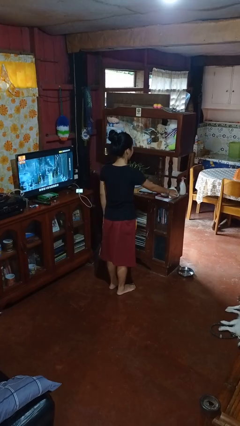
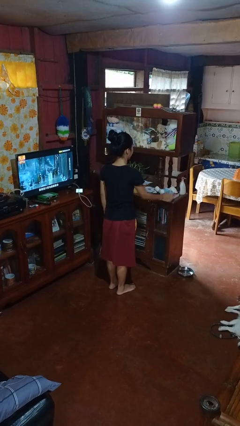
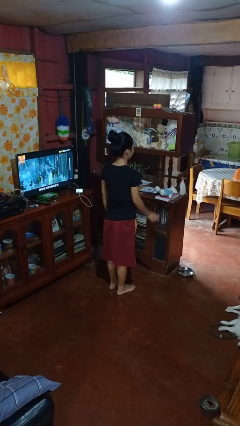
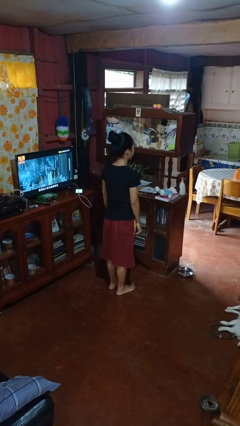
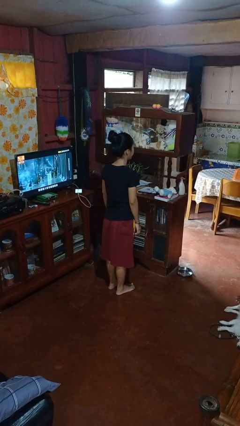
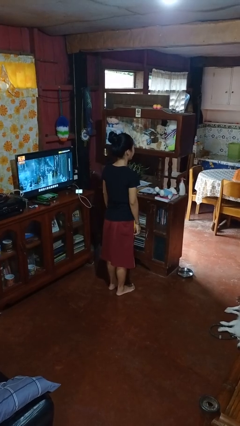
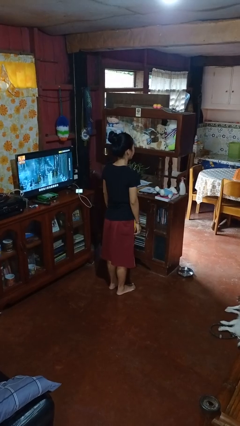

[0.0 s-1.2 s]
person puts down object on shelf

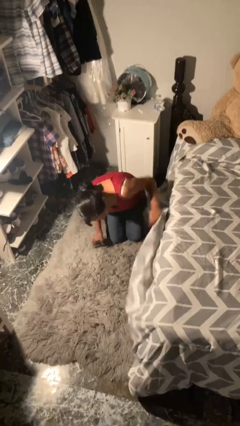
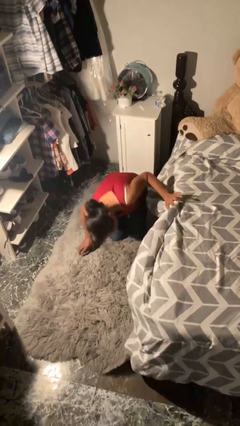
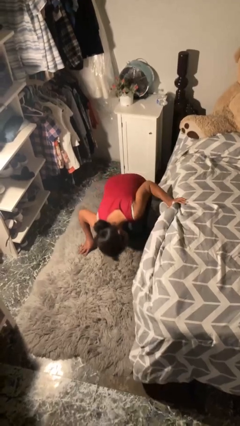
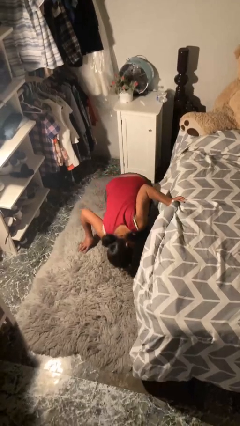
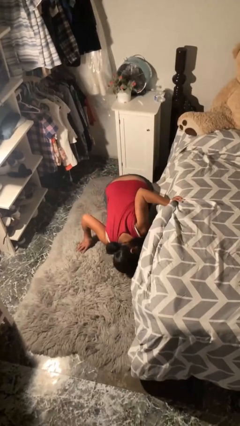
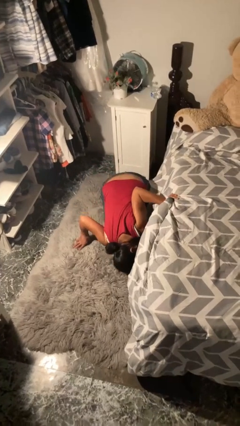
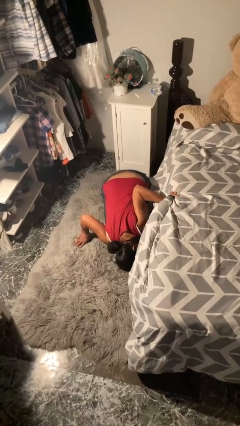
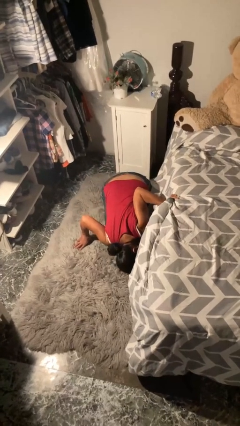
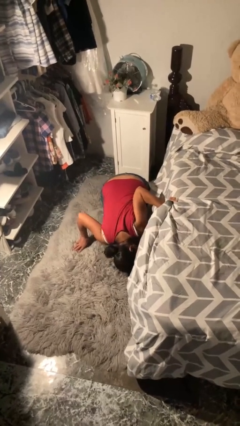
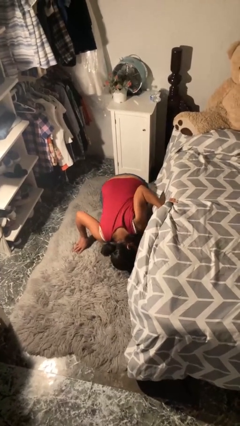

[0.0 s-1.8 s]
person searches under bed

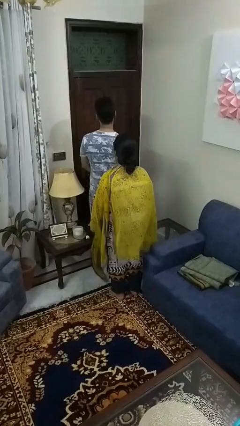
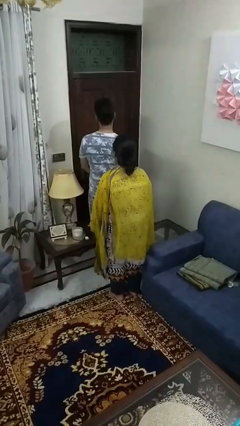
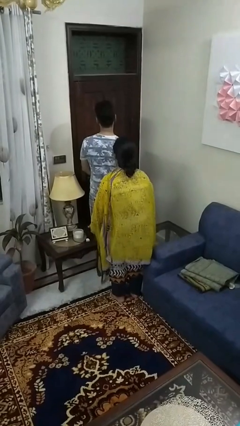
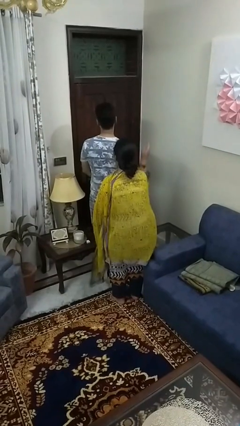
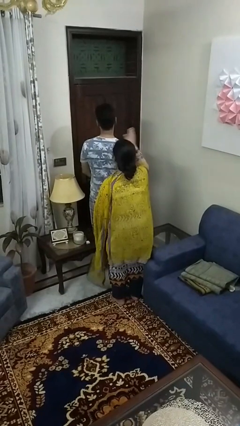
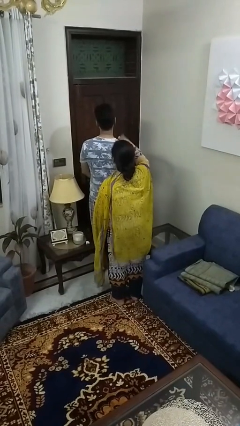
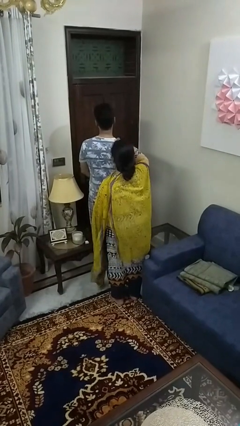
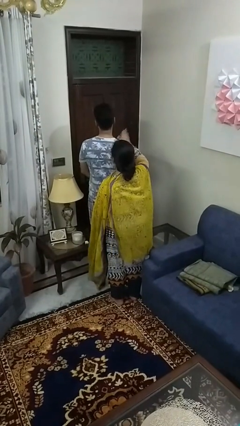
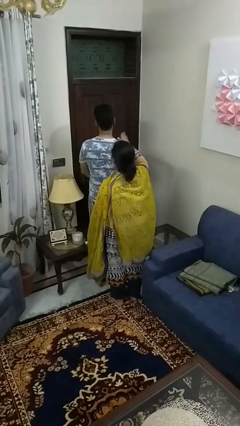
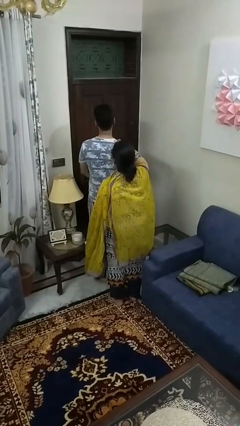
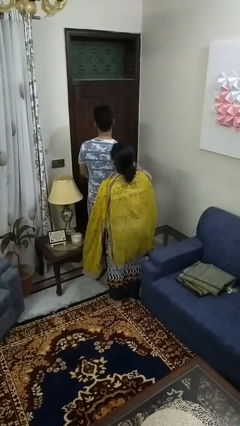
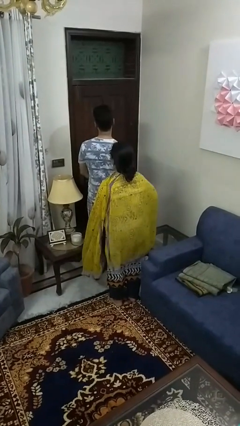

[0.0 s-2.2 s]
person pounds shoulders of person

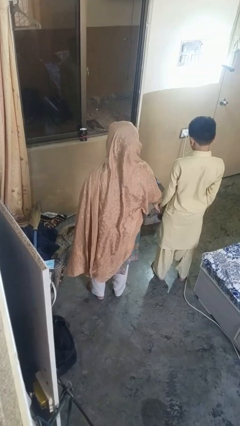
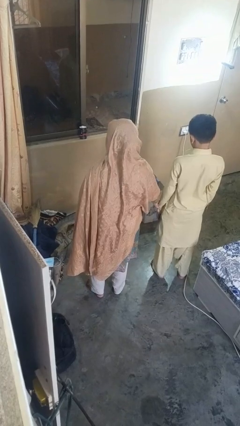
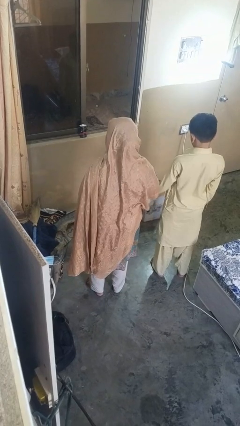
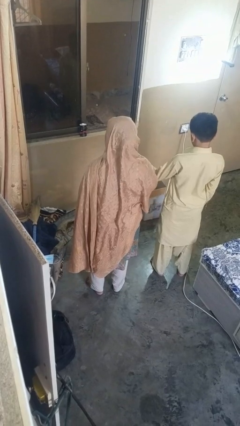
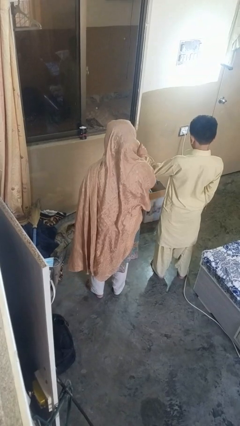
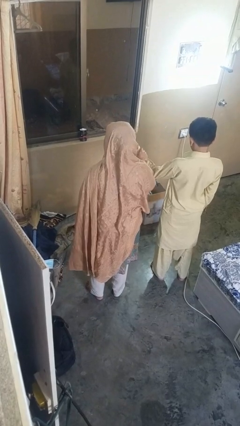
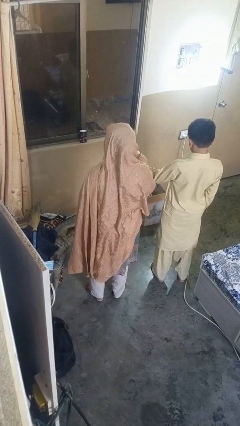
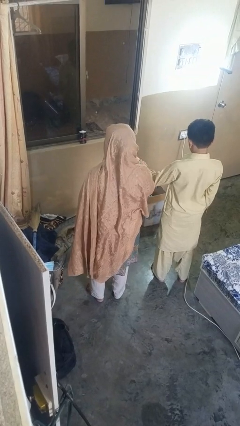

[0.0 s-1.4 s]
person grabs person by forearm

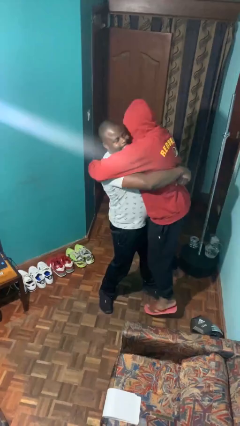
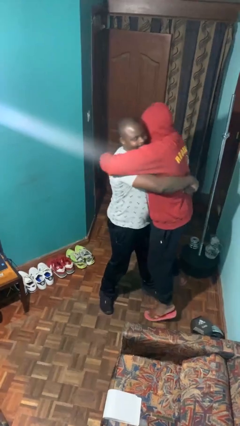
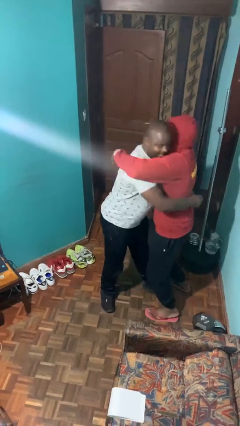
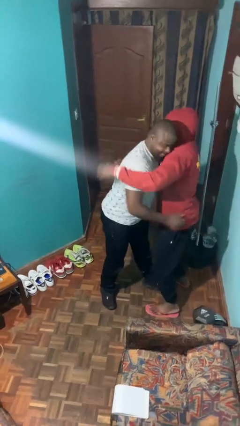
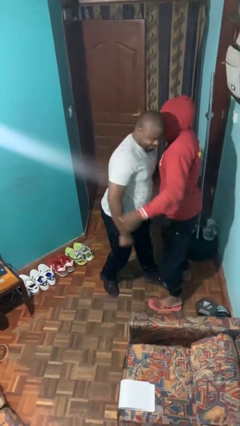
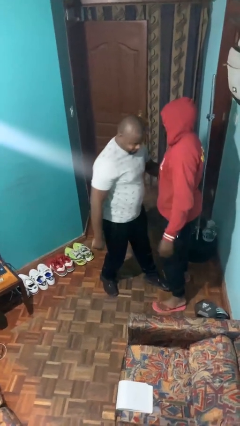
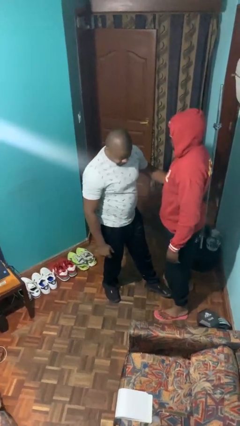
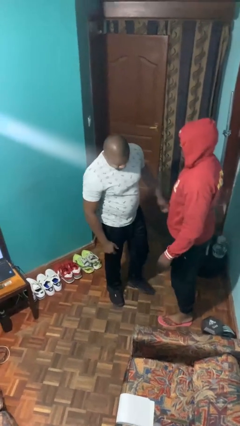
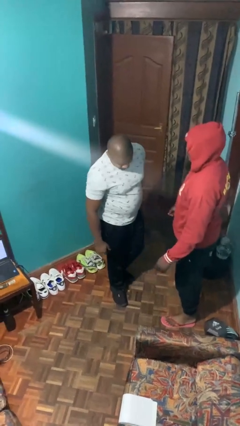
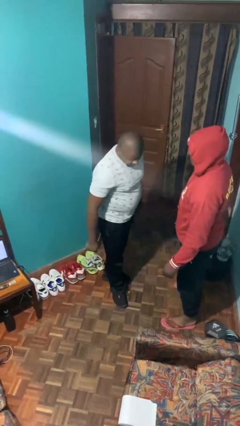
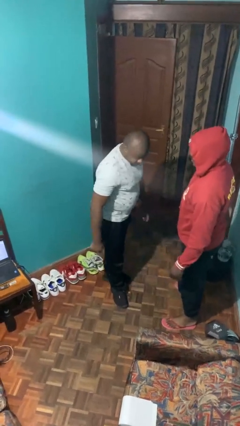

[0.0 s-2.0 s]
person puts down person

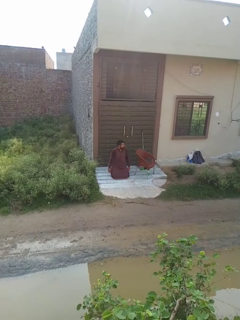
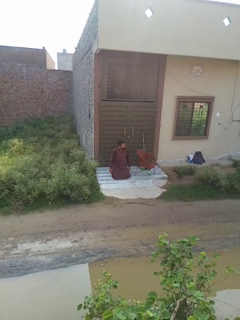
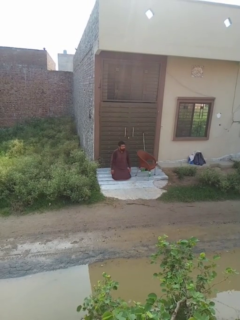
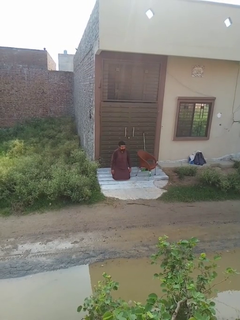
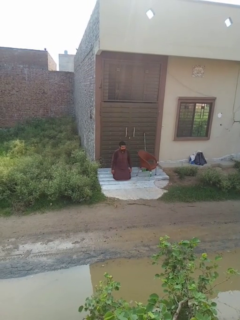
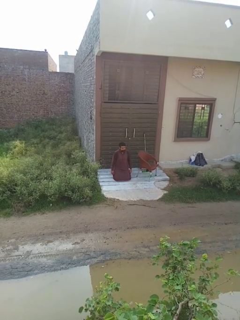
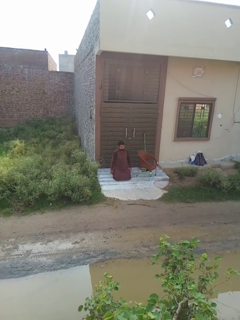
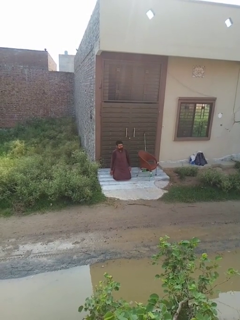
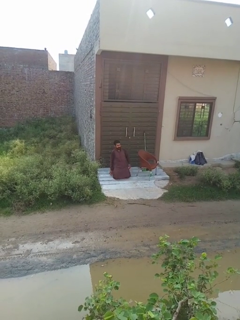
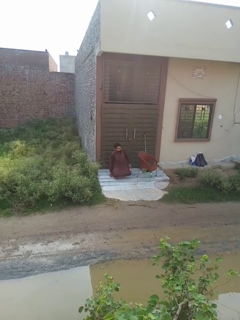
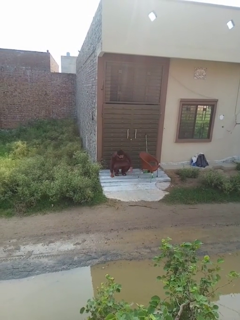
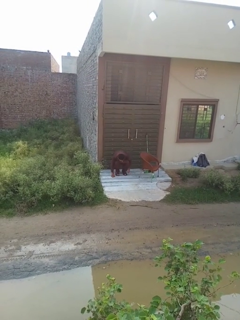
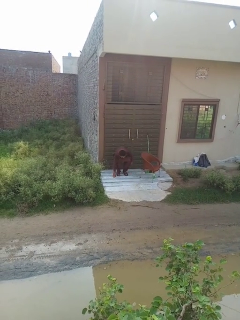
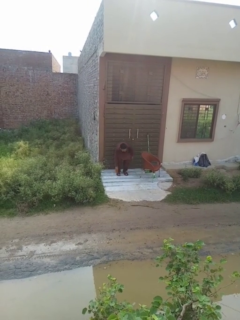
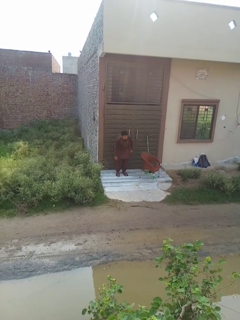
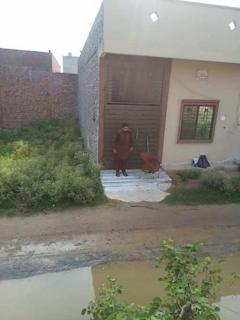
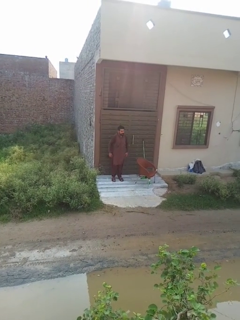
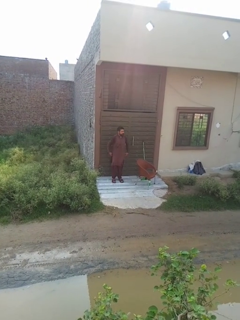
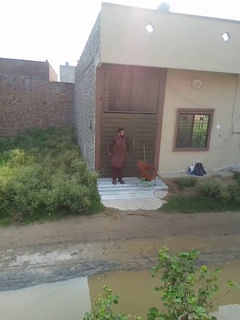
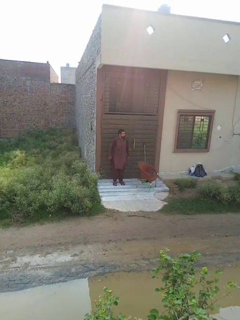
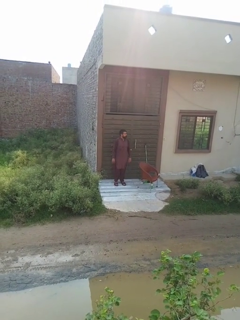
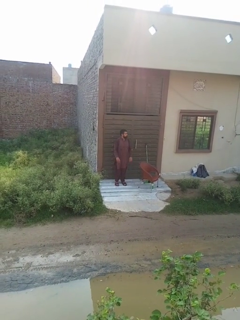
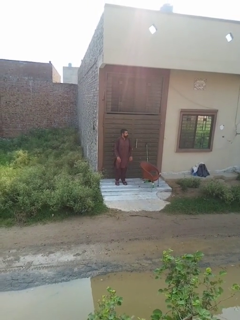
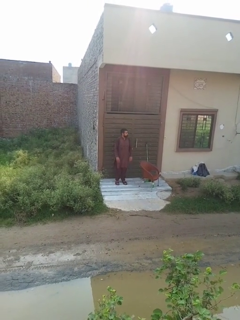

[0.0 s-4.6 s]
person stands up from floor

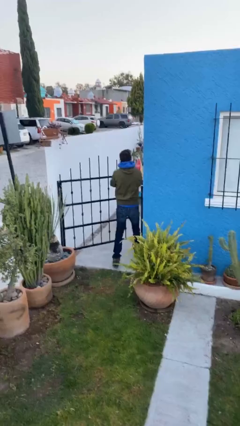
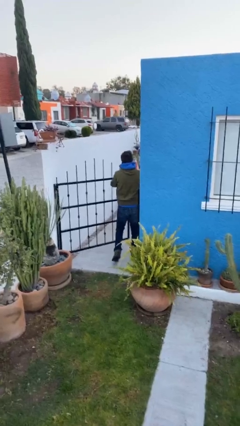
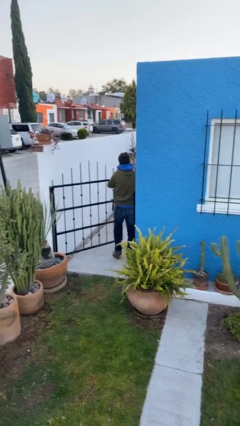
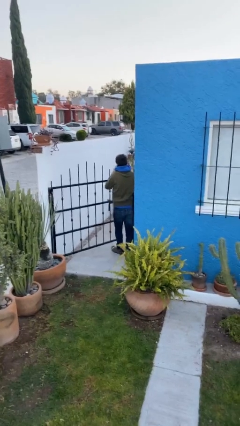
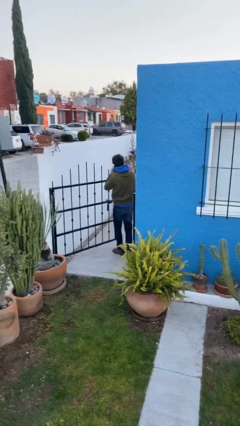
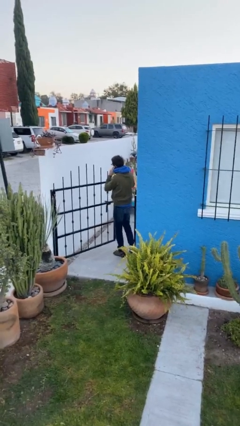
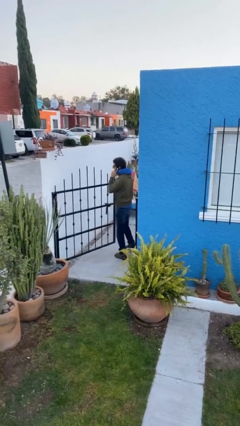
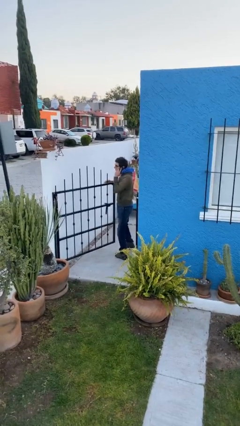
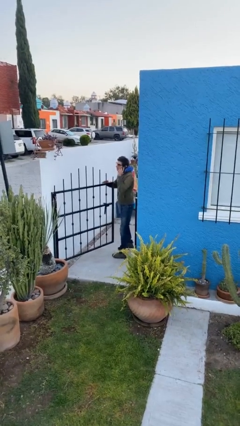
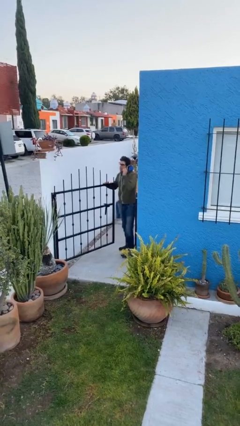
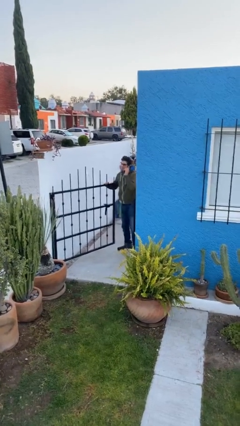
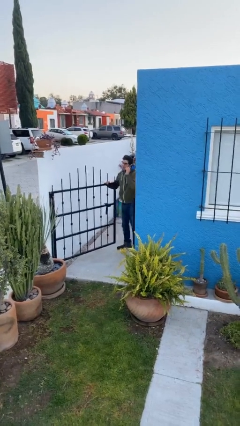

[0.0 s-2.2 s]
person exits scene through structure

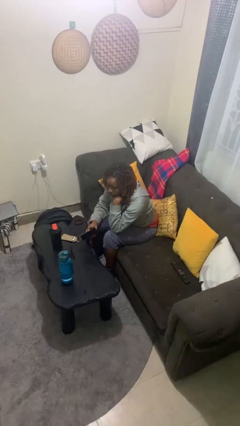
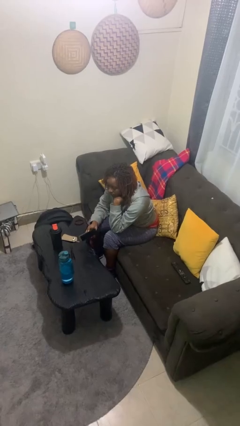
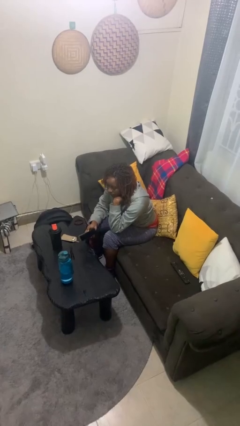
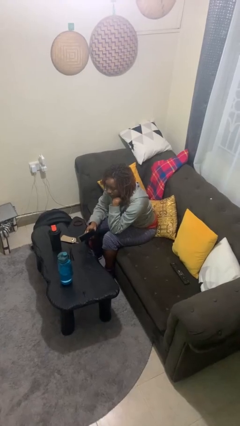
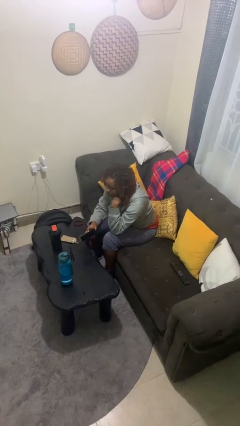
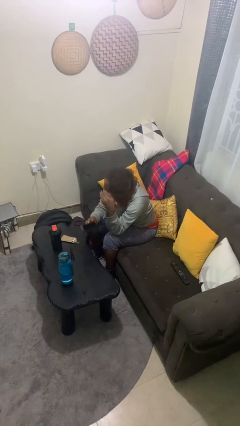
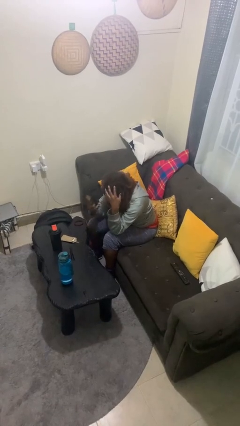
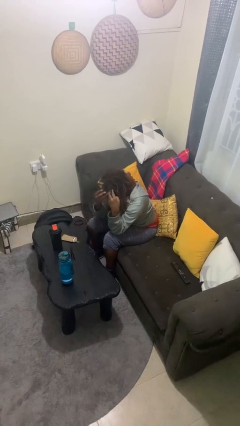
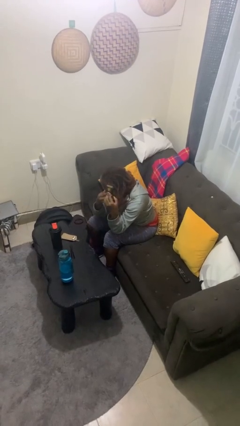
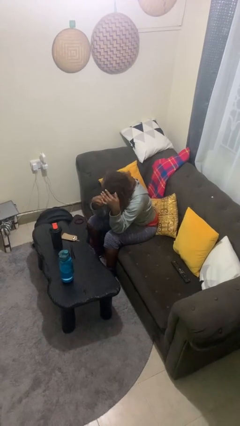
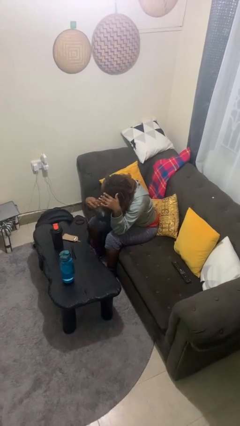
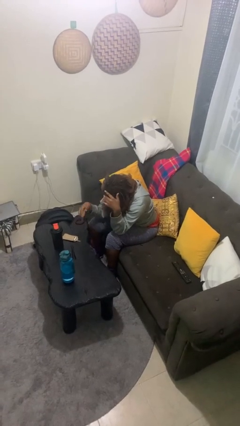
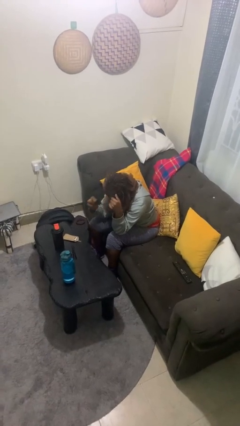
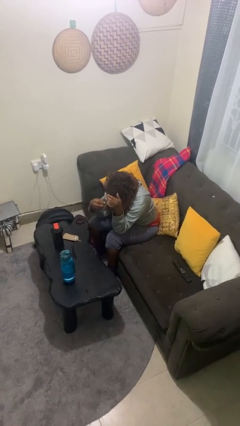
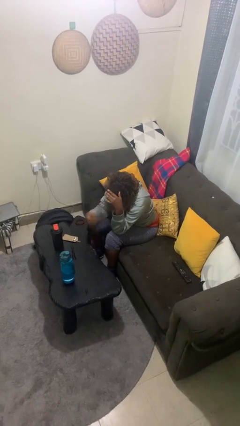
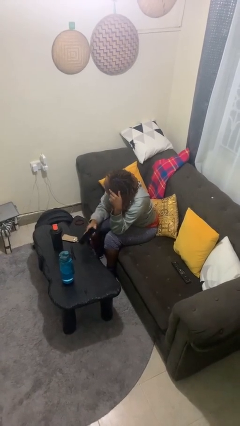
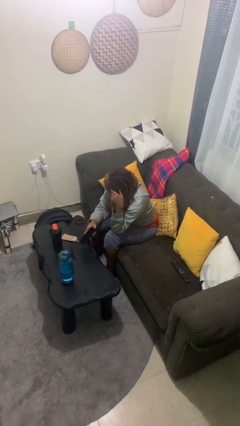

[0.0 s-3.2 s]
person brushes hair
